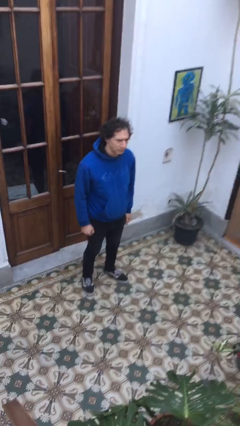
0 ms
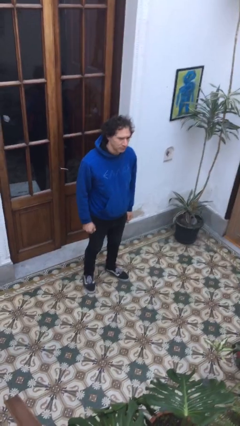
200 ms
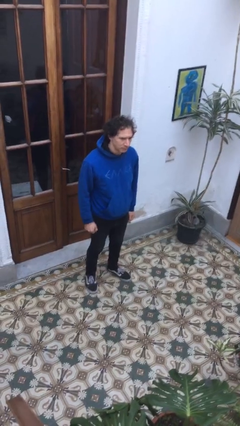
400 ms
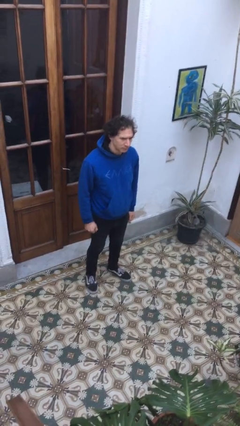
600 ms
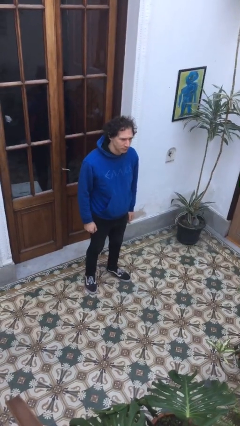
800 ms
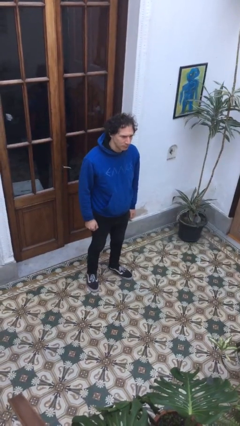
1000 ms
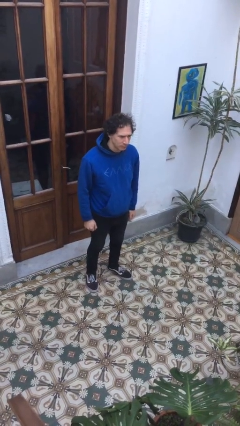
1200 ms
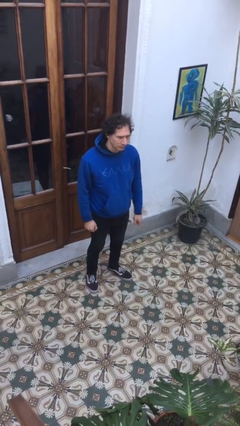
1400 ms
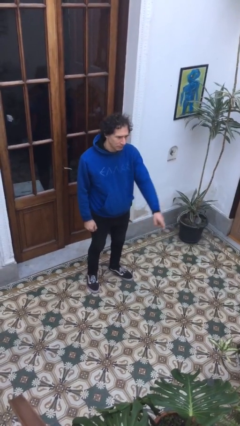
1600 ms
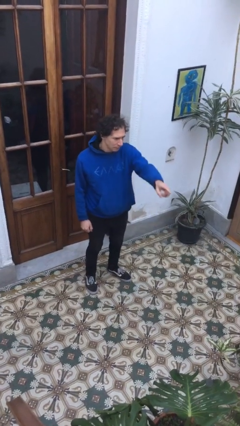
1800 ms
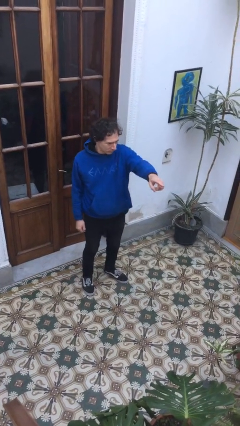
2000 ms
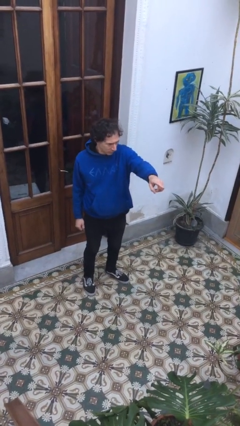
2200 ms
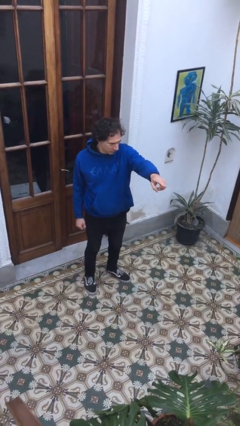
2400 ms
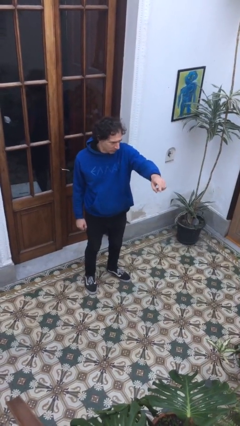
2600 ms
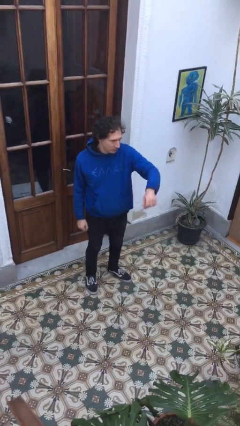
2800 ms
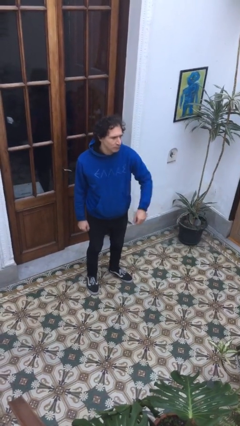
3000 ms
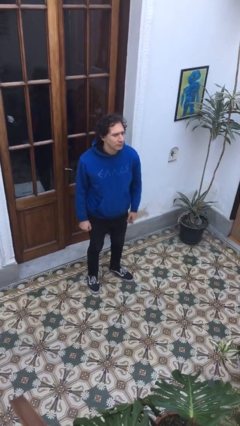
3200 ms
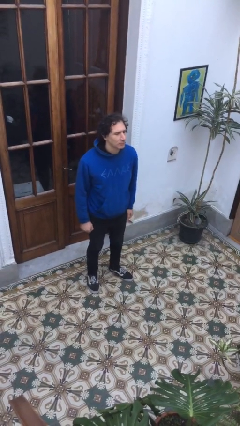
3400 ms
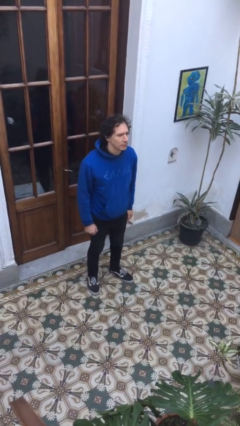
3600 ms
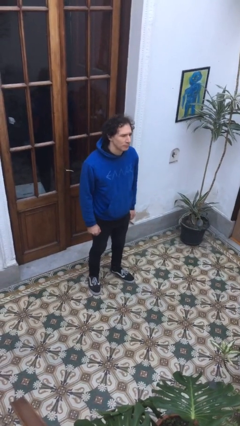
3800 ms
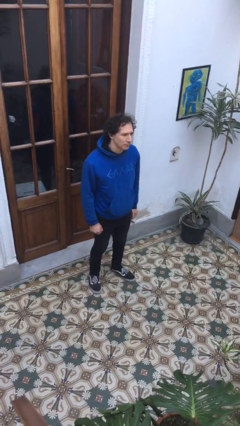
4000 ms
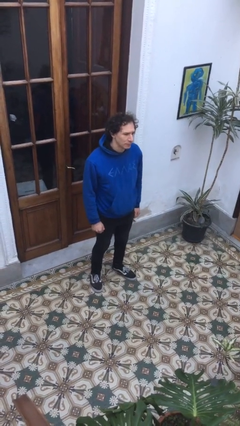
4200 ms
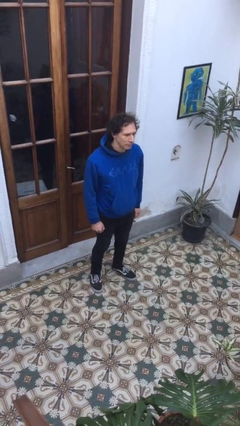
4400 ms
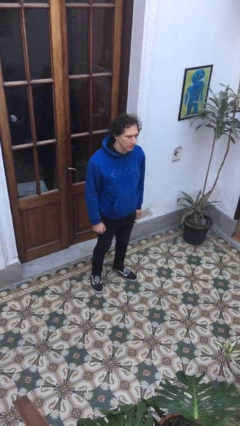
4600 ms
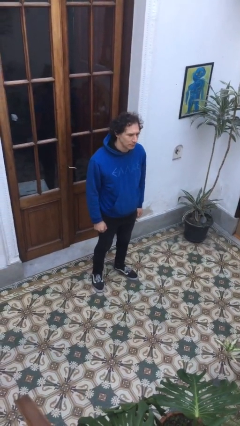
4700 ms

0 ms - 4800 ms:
person points at person

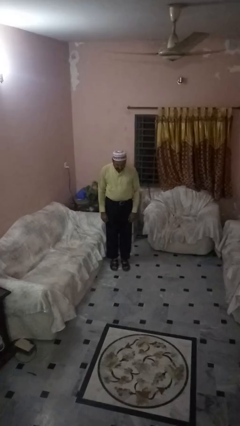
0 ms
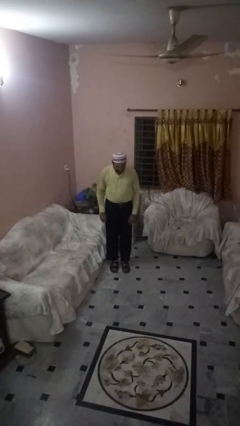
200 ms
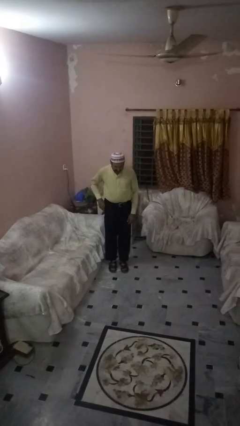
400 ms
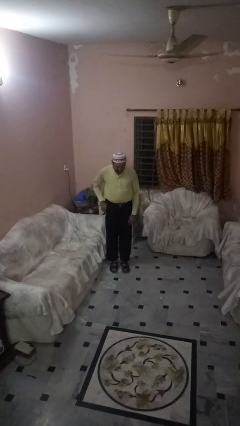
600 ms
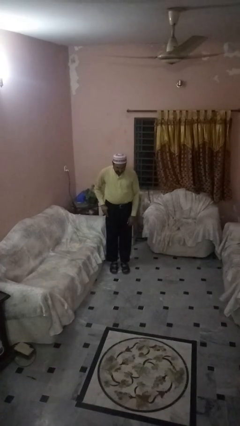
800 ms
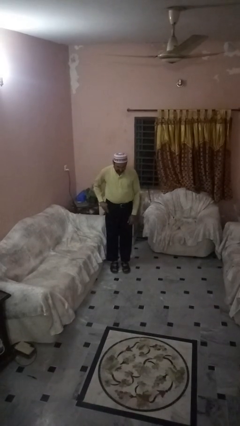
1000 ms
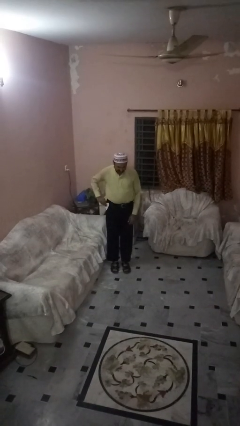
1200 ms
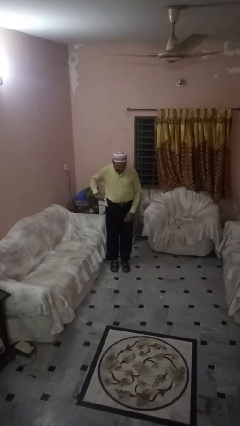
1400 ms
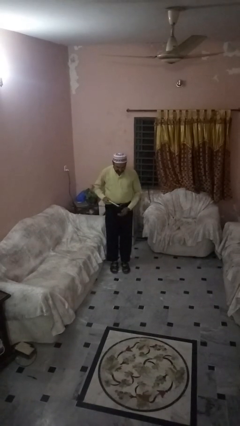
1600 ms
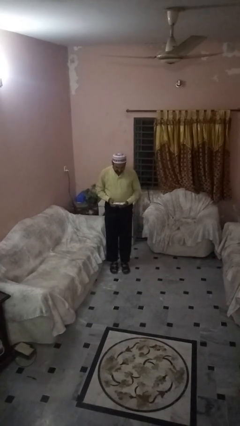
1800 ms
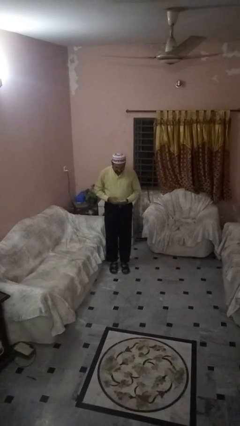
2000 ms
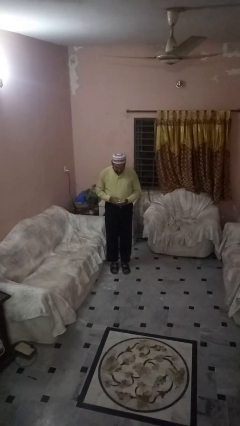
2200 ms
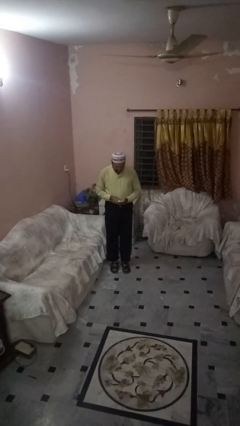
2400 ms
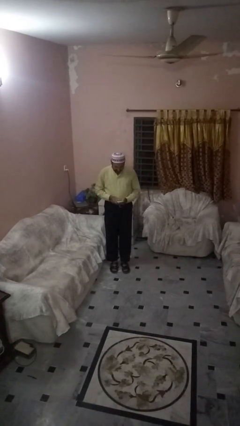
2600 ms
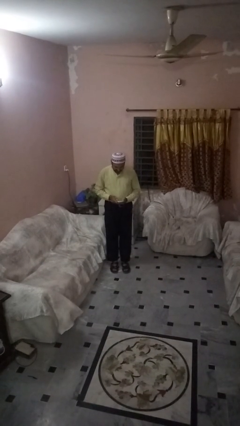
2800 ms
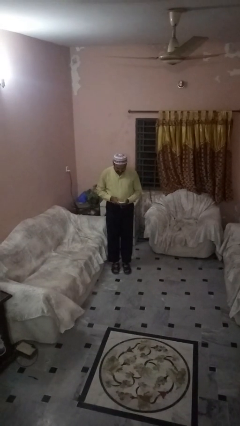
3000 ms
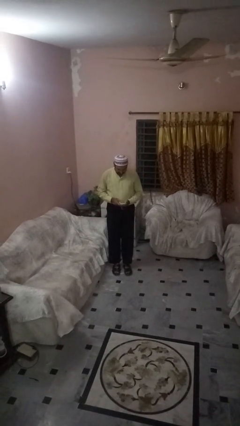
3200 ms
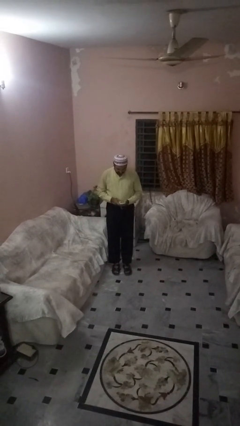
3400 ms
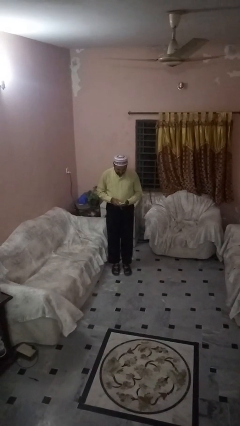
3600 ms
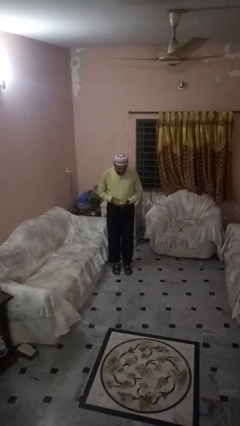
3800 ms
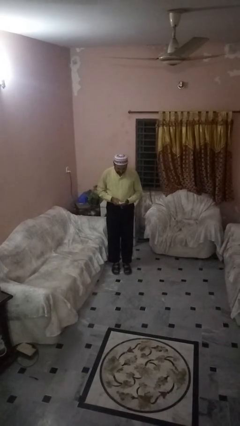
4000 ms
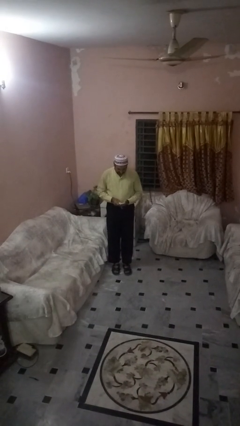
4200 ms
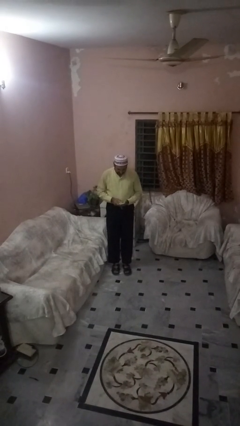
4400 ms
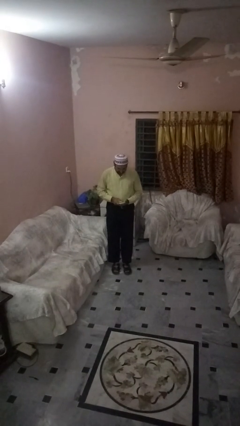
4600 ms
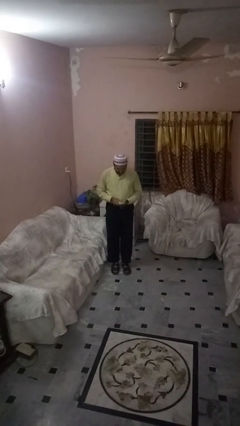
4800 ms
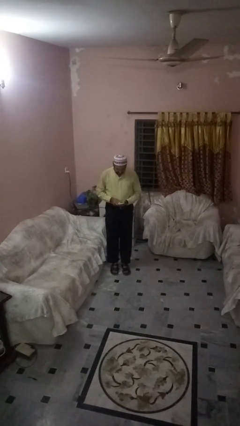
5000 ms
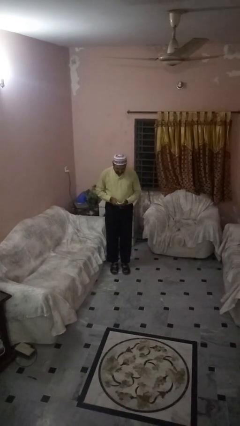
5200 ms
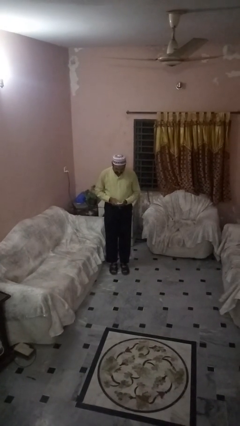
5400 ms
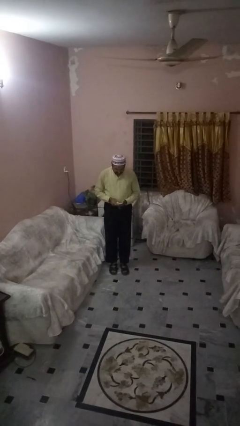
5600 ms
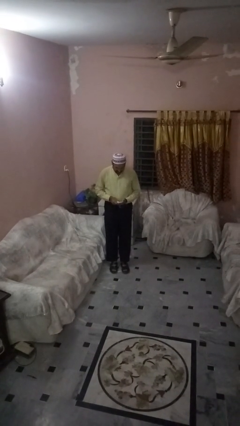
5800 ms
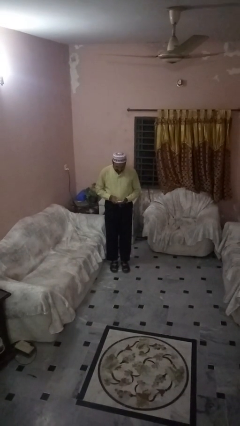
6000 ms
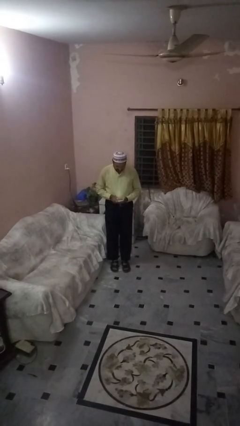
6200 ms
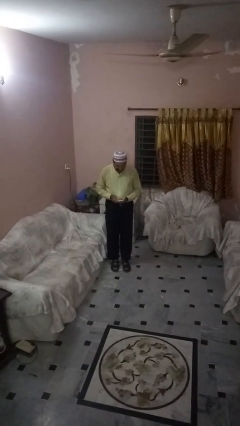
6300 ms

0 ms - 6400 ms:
person takes phone from pocket

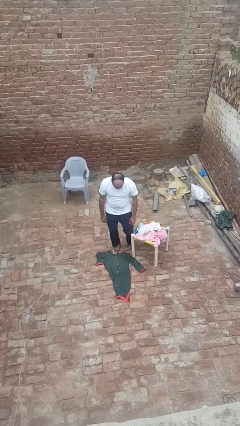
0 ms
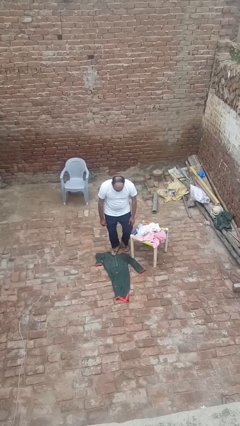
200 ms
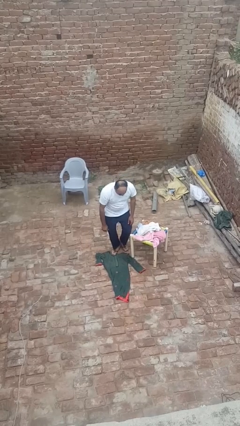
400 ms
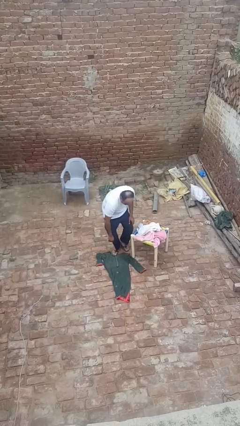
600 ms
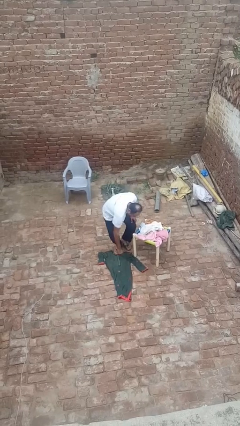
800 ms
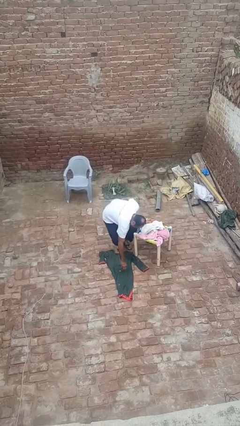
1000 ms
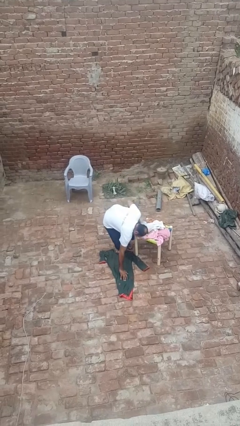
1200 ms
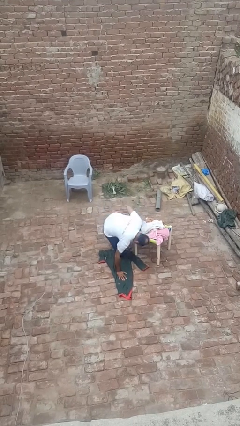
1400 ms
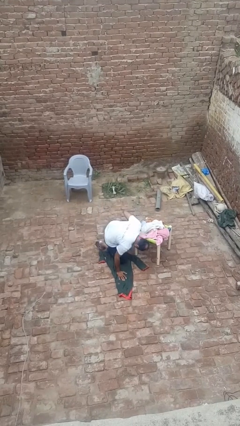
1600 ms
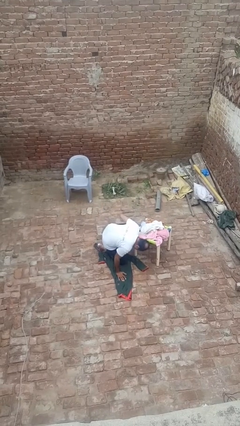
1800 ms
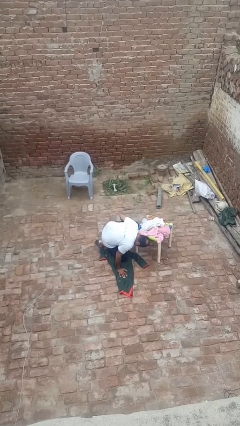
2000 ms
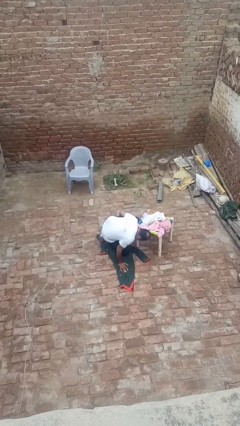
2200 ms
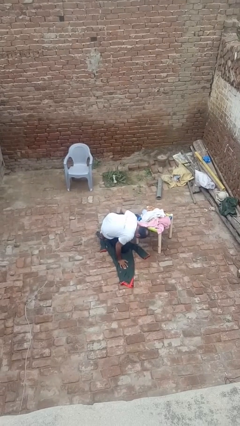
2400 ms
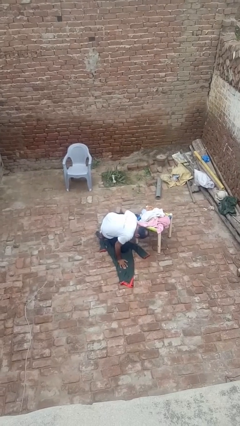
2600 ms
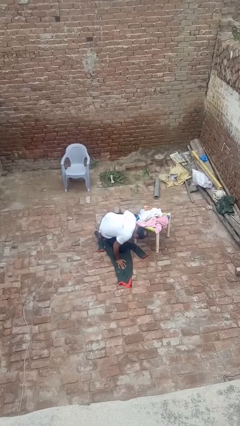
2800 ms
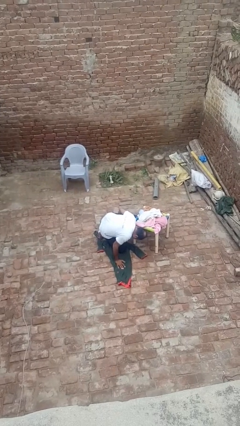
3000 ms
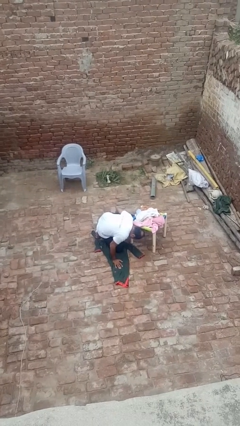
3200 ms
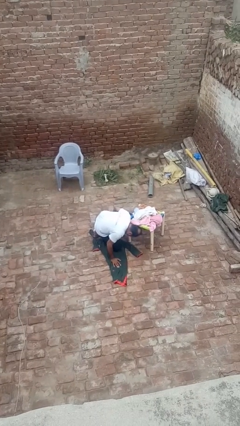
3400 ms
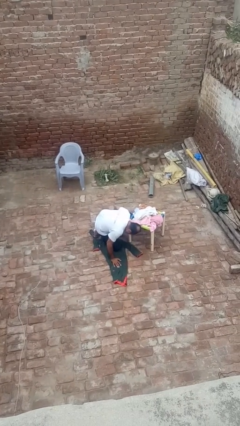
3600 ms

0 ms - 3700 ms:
person lies down on floor

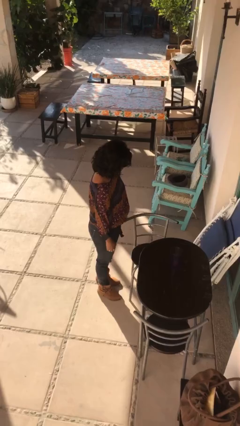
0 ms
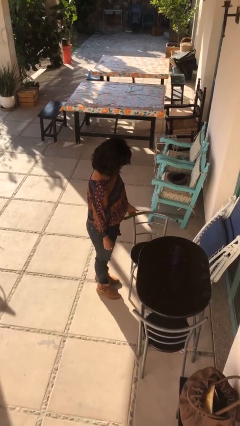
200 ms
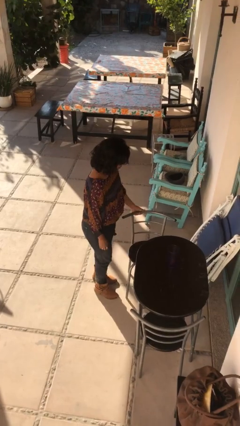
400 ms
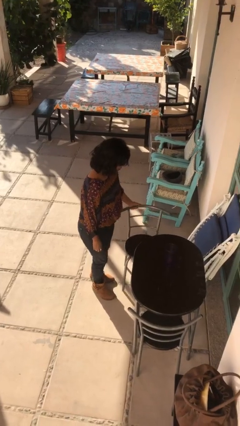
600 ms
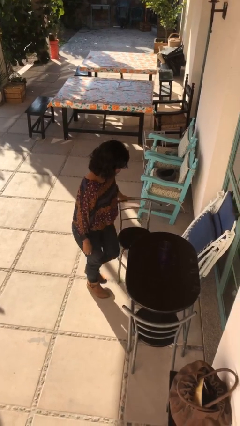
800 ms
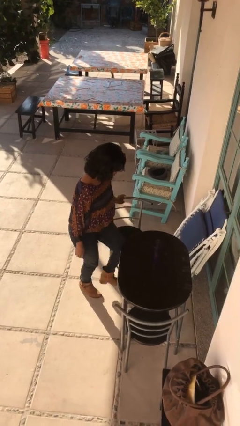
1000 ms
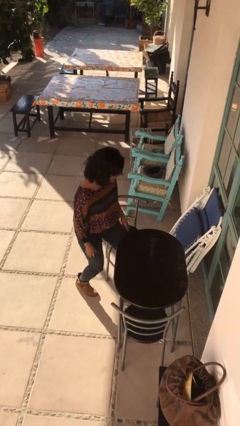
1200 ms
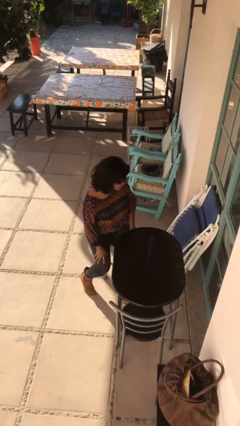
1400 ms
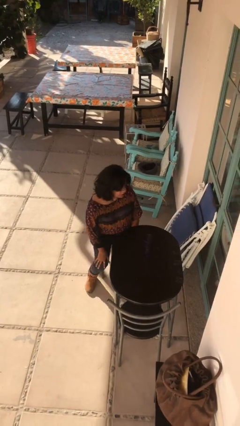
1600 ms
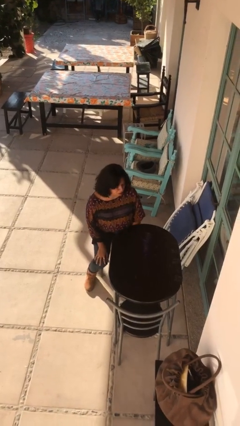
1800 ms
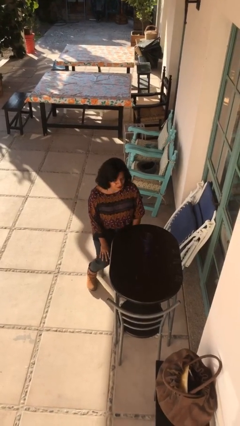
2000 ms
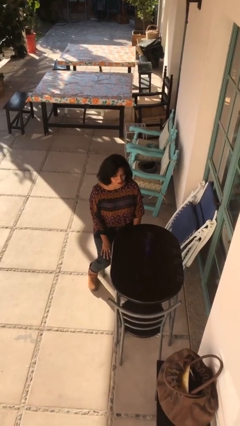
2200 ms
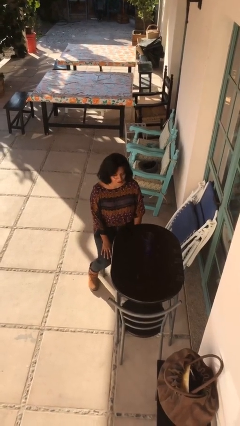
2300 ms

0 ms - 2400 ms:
person sits down

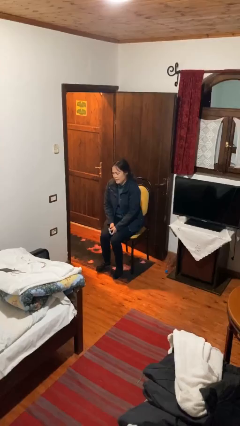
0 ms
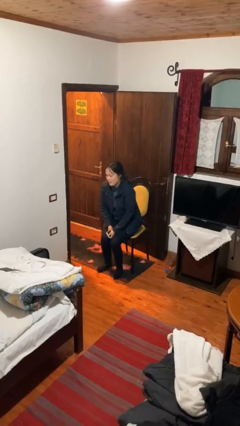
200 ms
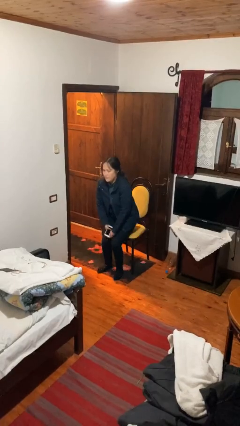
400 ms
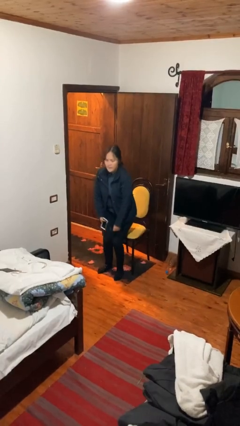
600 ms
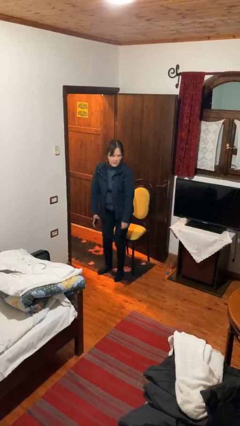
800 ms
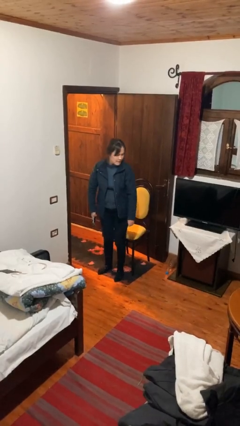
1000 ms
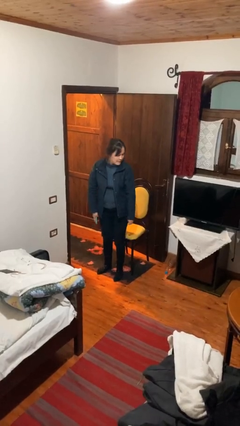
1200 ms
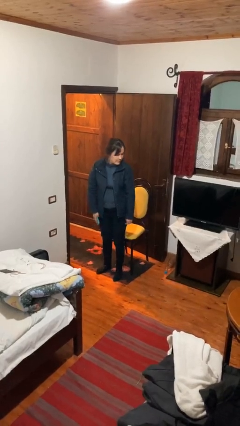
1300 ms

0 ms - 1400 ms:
person stands up
